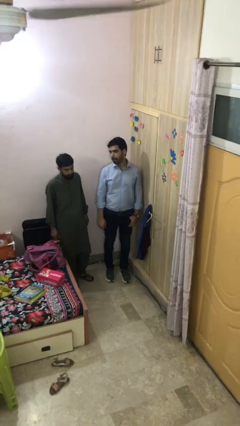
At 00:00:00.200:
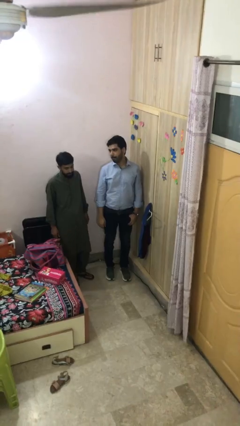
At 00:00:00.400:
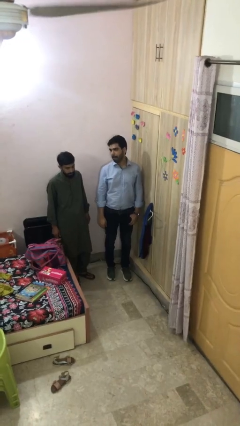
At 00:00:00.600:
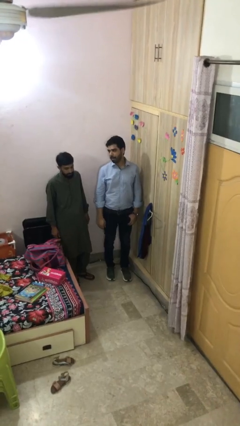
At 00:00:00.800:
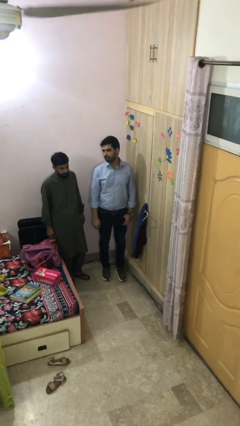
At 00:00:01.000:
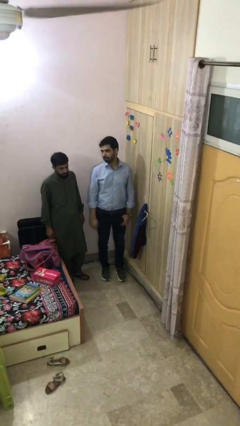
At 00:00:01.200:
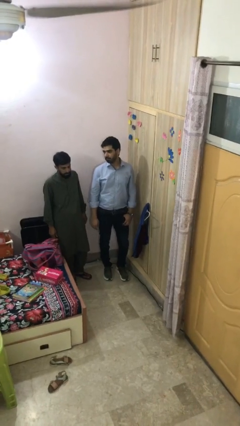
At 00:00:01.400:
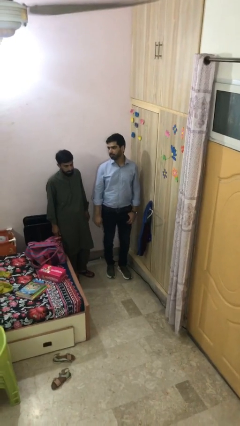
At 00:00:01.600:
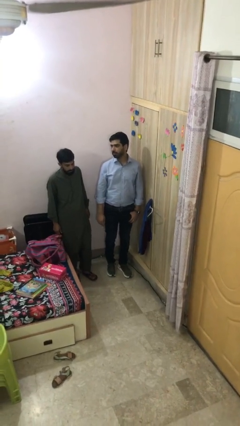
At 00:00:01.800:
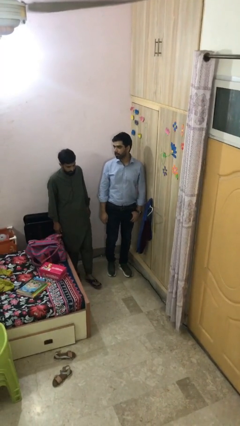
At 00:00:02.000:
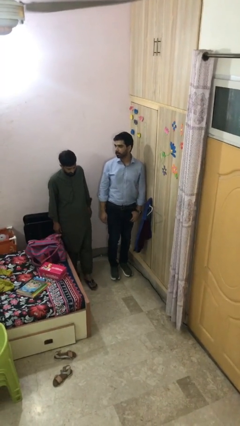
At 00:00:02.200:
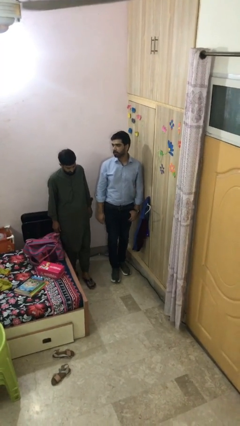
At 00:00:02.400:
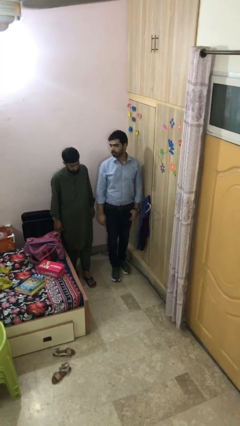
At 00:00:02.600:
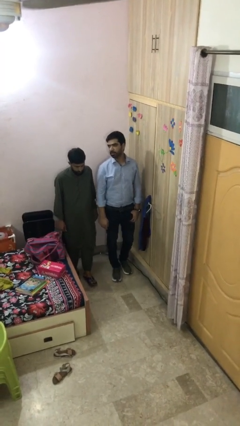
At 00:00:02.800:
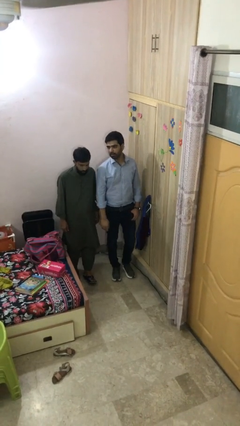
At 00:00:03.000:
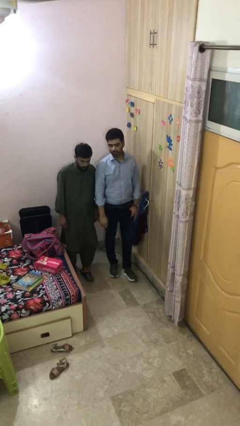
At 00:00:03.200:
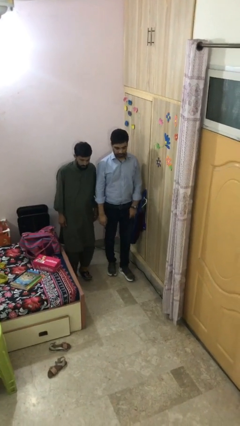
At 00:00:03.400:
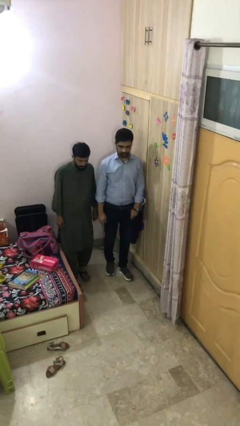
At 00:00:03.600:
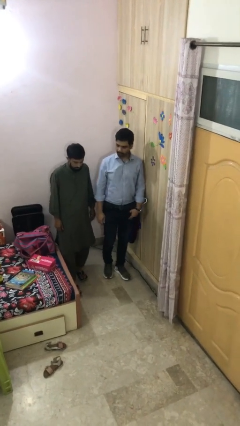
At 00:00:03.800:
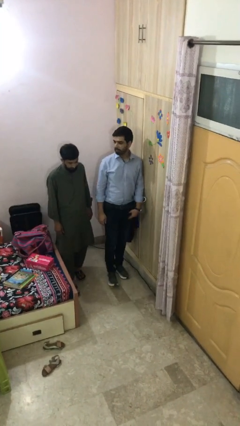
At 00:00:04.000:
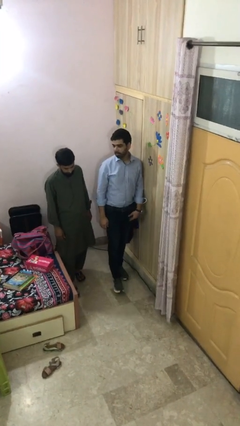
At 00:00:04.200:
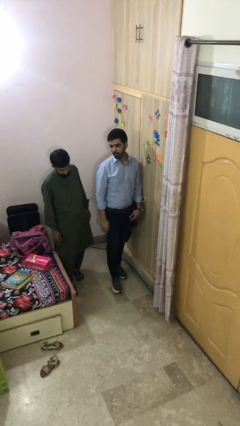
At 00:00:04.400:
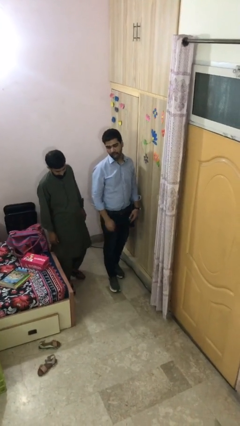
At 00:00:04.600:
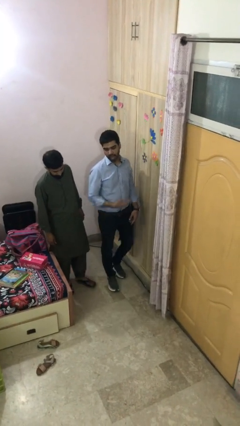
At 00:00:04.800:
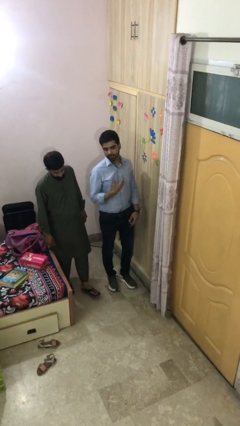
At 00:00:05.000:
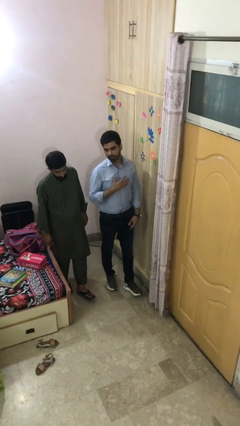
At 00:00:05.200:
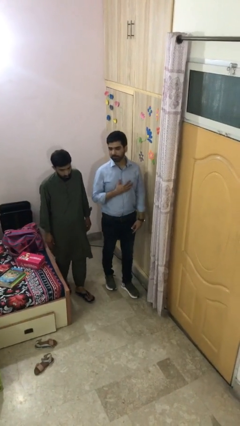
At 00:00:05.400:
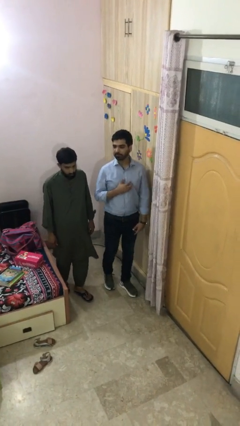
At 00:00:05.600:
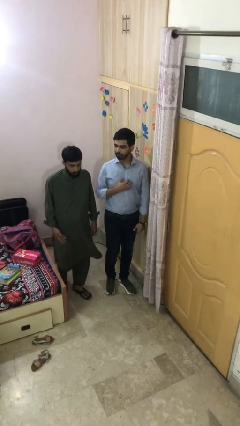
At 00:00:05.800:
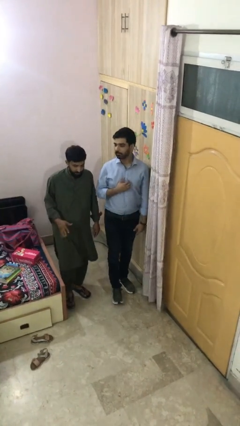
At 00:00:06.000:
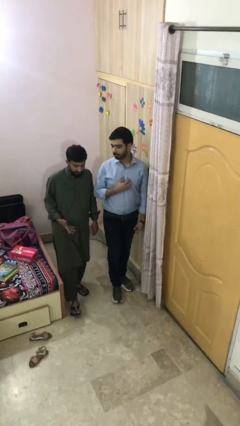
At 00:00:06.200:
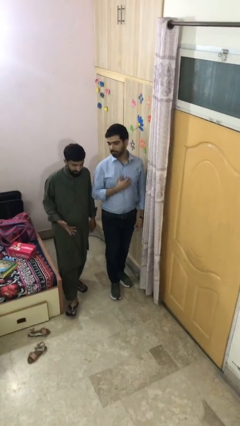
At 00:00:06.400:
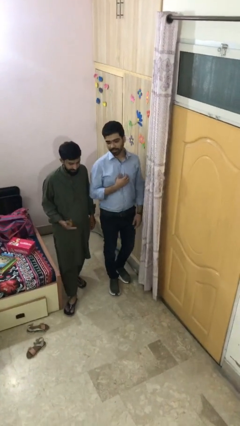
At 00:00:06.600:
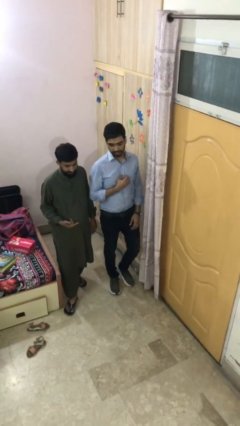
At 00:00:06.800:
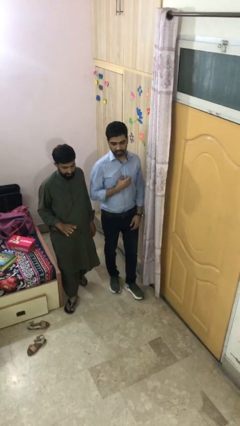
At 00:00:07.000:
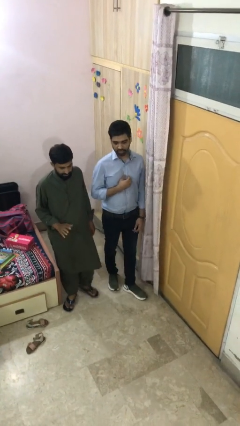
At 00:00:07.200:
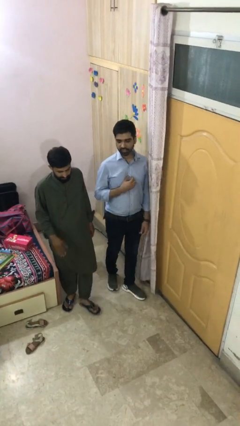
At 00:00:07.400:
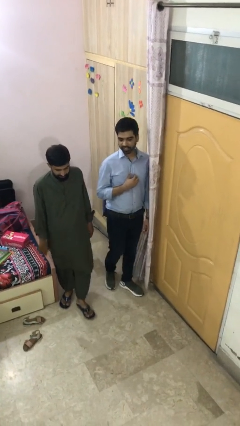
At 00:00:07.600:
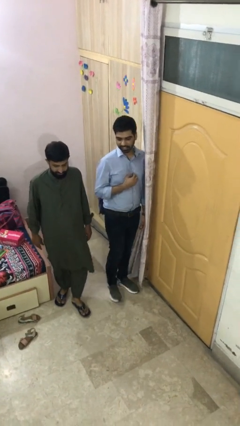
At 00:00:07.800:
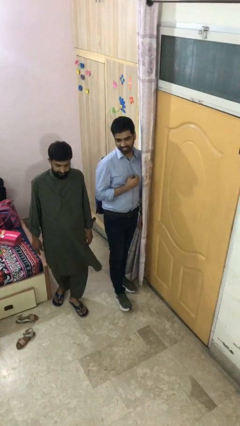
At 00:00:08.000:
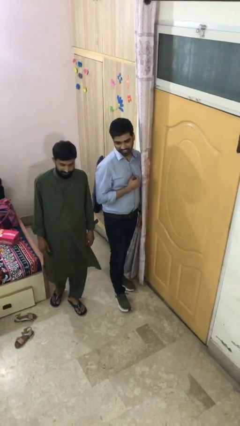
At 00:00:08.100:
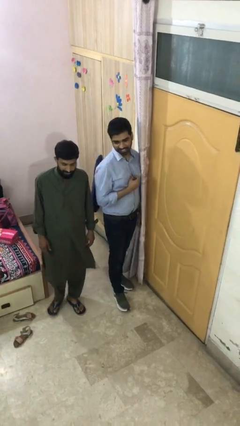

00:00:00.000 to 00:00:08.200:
person talks to person

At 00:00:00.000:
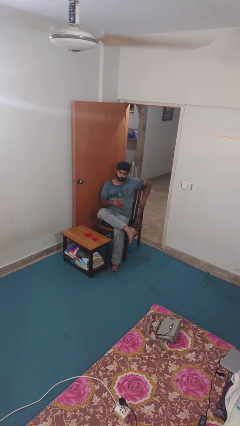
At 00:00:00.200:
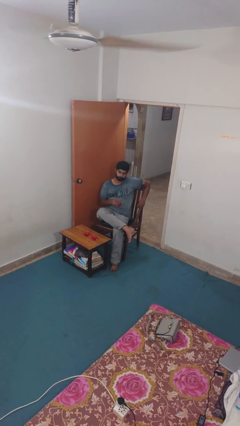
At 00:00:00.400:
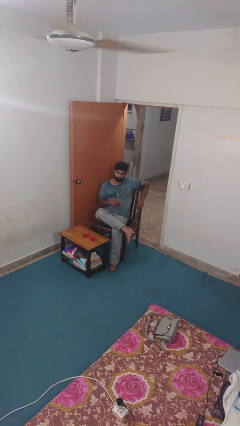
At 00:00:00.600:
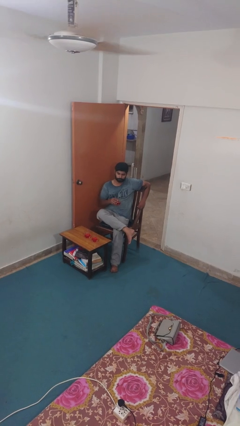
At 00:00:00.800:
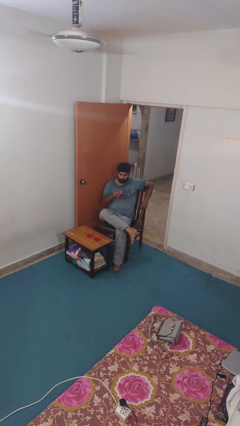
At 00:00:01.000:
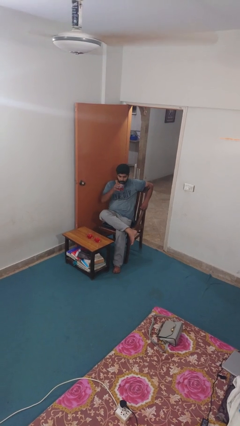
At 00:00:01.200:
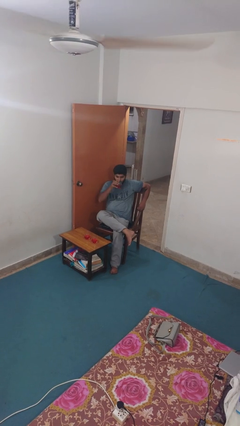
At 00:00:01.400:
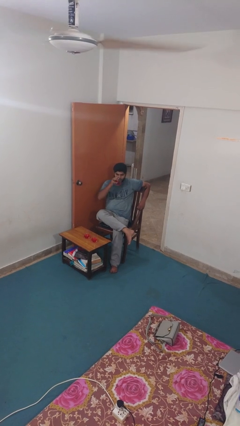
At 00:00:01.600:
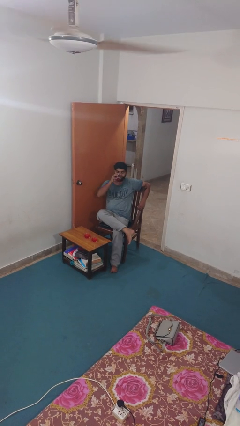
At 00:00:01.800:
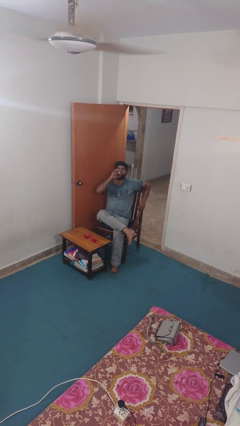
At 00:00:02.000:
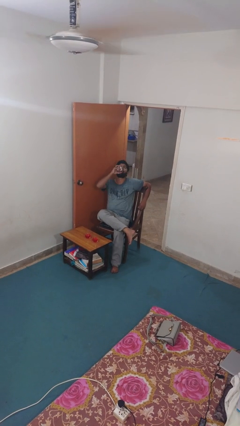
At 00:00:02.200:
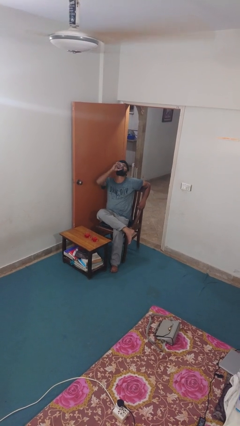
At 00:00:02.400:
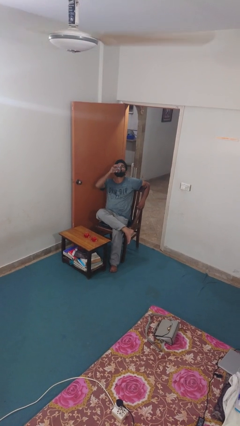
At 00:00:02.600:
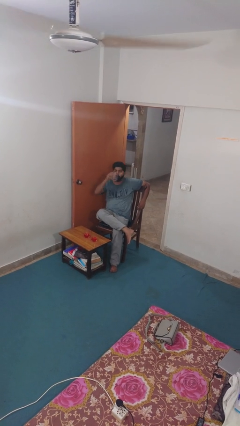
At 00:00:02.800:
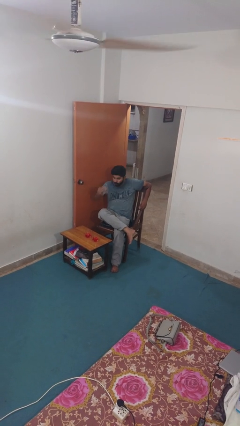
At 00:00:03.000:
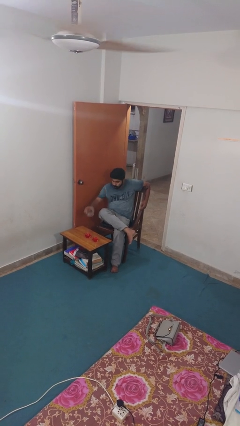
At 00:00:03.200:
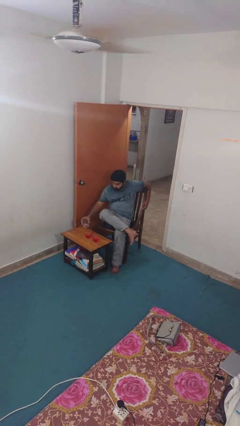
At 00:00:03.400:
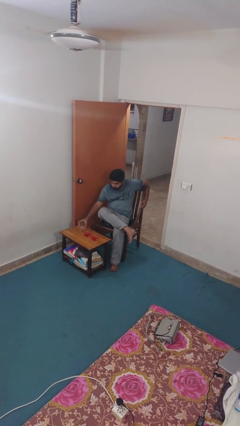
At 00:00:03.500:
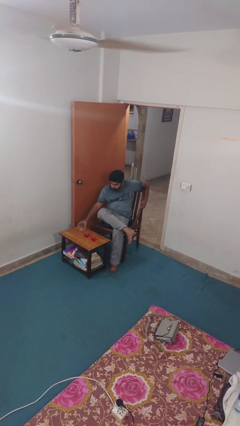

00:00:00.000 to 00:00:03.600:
person drinks from shotglass

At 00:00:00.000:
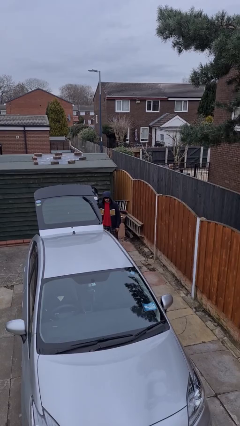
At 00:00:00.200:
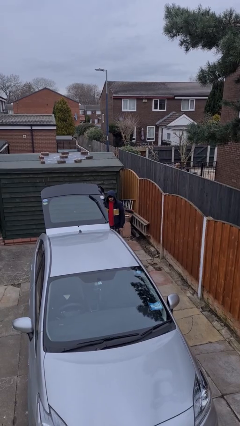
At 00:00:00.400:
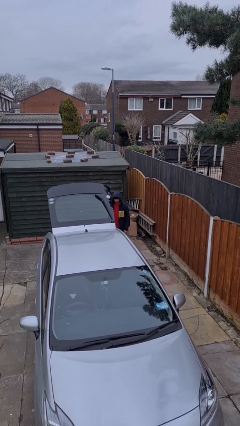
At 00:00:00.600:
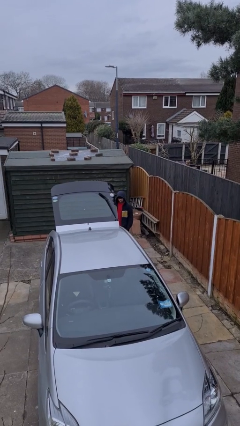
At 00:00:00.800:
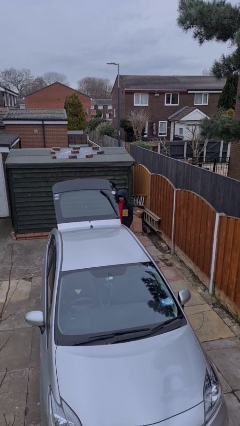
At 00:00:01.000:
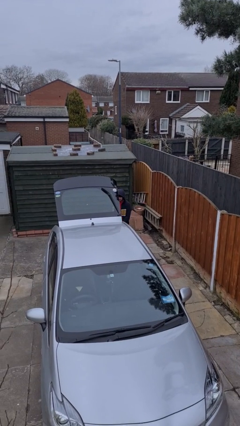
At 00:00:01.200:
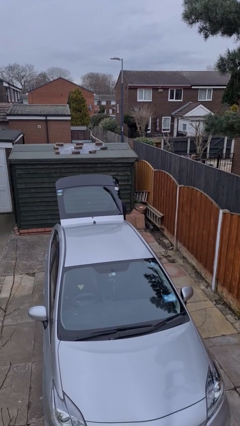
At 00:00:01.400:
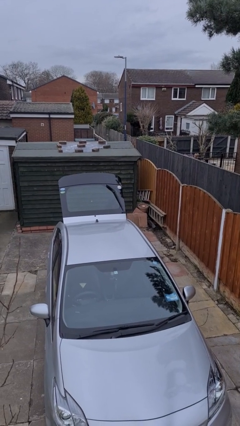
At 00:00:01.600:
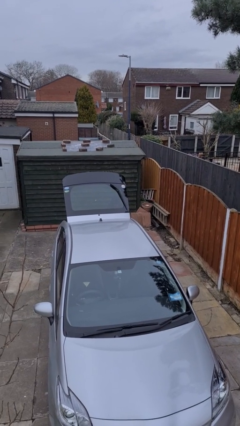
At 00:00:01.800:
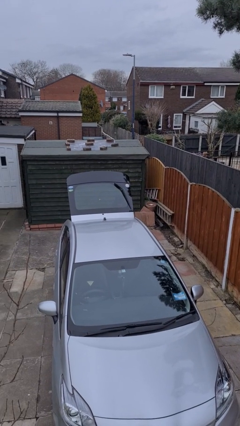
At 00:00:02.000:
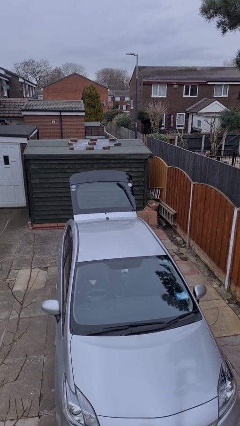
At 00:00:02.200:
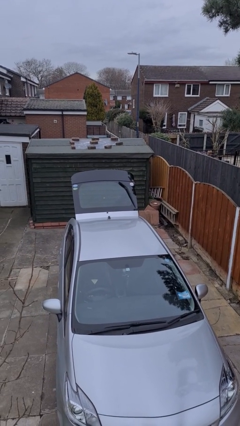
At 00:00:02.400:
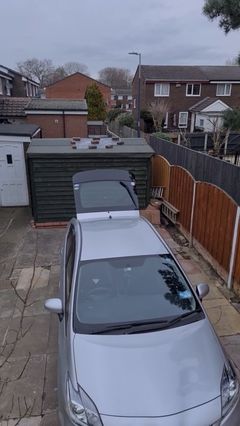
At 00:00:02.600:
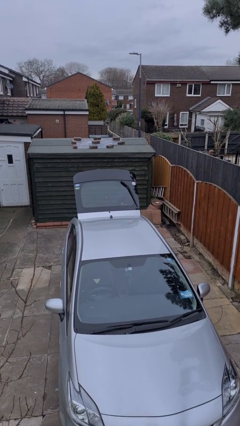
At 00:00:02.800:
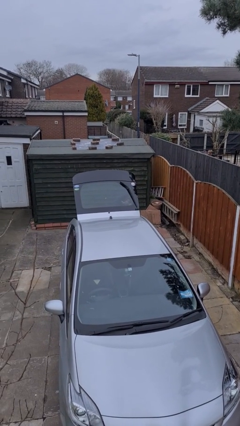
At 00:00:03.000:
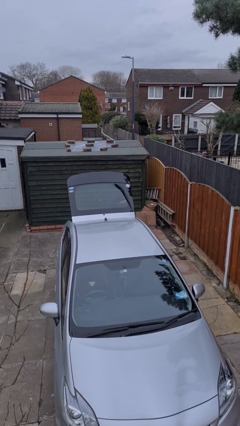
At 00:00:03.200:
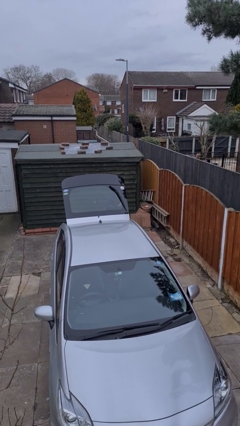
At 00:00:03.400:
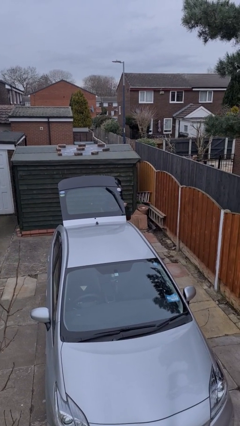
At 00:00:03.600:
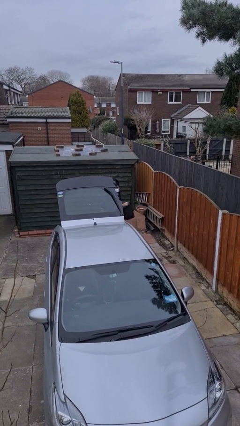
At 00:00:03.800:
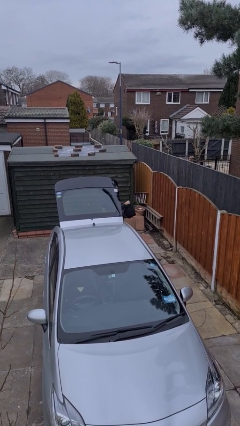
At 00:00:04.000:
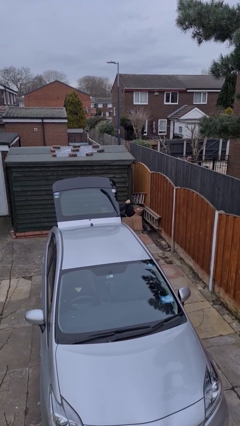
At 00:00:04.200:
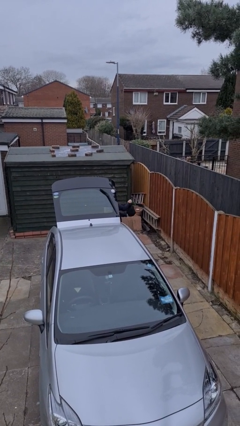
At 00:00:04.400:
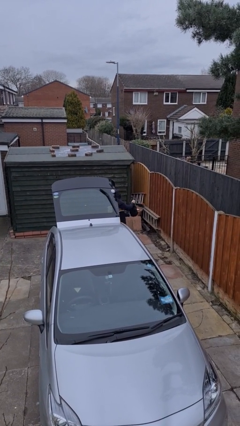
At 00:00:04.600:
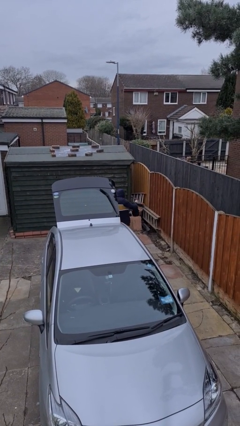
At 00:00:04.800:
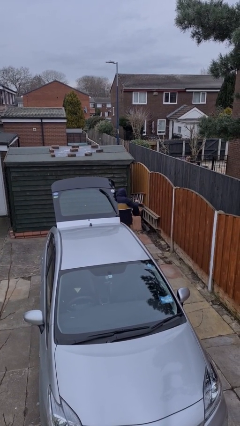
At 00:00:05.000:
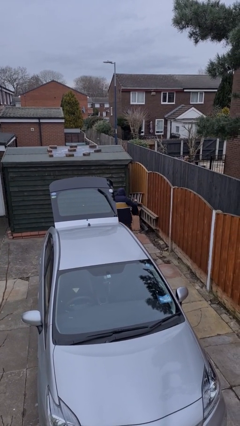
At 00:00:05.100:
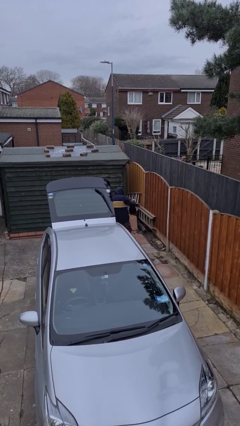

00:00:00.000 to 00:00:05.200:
person unloads car

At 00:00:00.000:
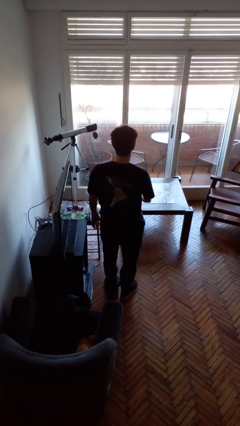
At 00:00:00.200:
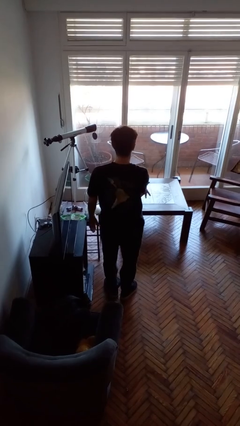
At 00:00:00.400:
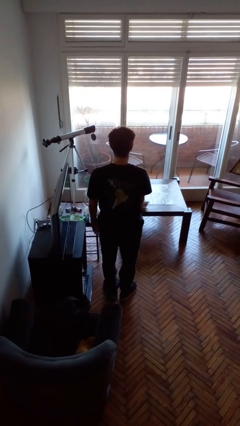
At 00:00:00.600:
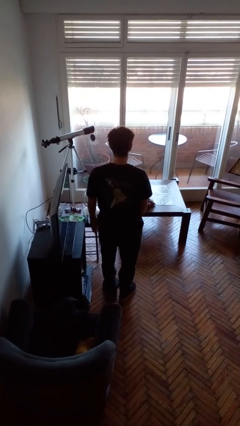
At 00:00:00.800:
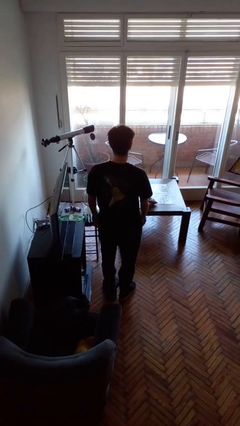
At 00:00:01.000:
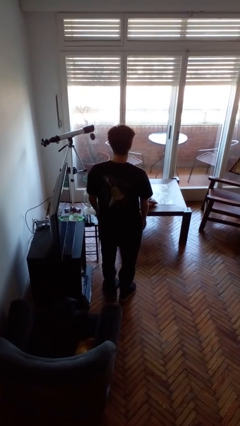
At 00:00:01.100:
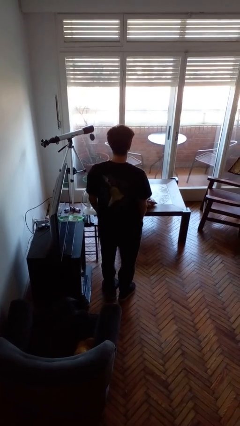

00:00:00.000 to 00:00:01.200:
person throws object on table
